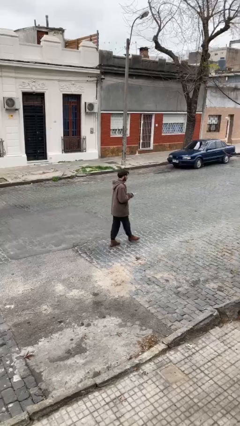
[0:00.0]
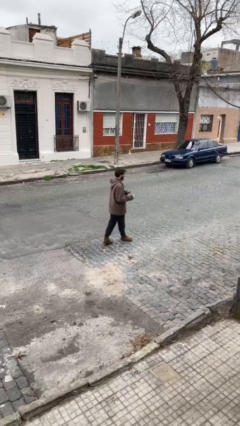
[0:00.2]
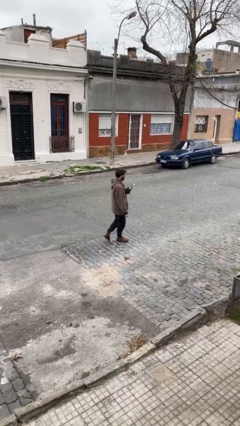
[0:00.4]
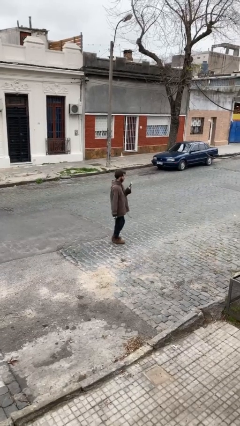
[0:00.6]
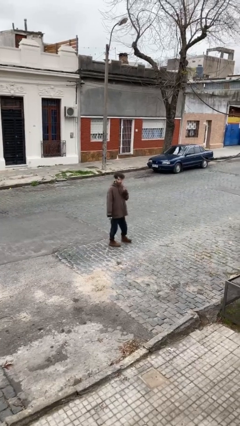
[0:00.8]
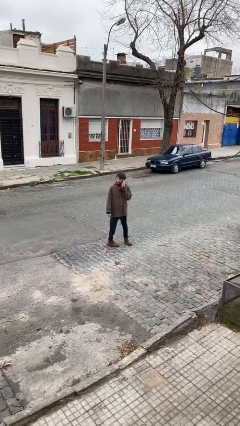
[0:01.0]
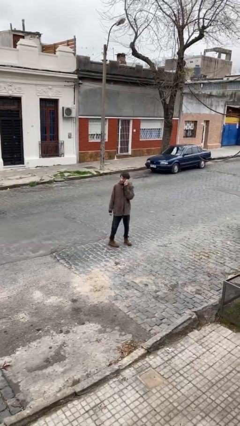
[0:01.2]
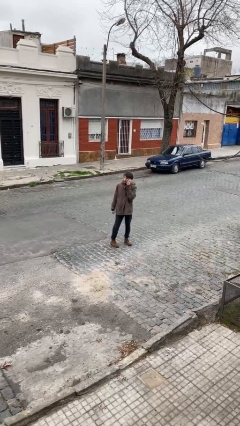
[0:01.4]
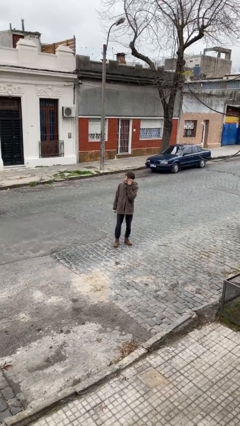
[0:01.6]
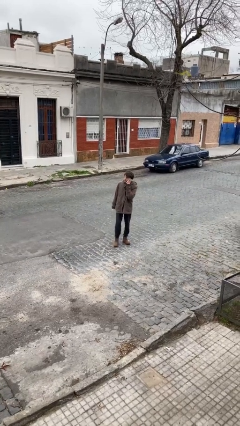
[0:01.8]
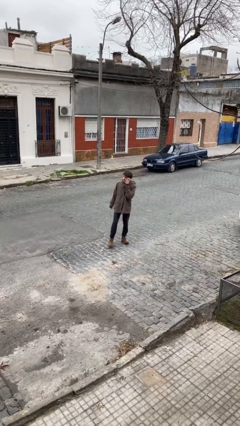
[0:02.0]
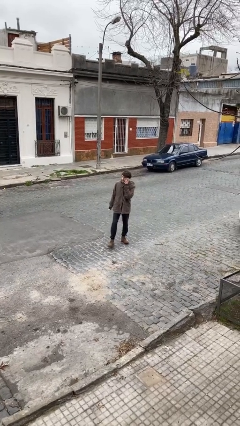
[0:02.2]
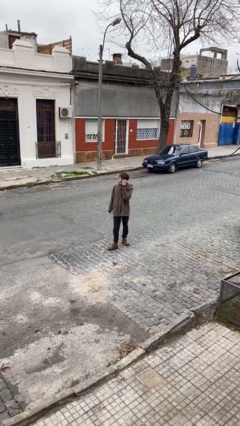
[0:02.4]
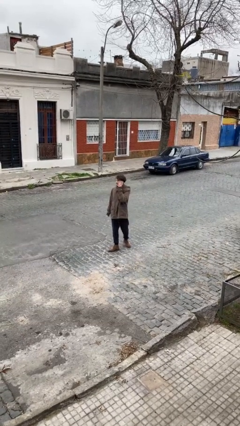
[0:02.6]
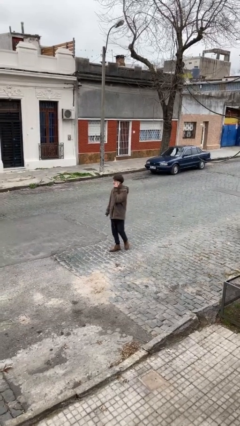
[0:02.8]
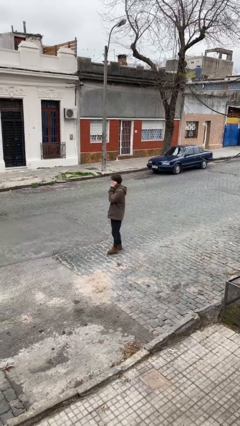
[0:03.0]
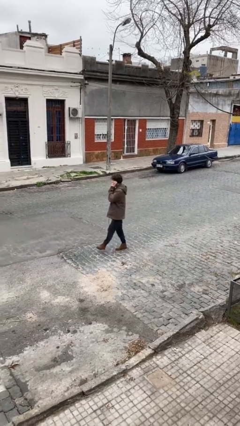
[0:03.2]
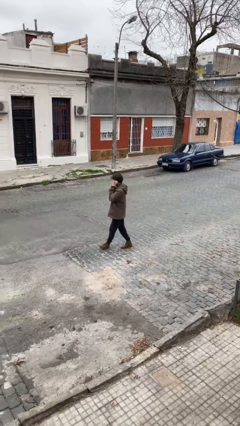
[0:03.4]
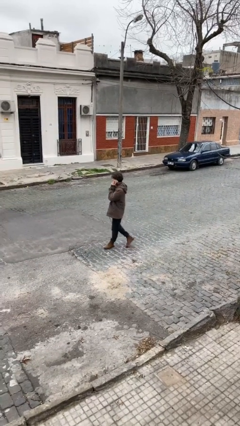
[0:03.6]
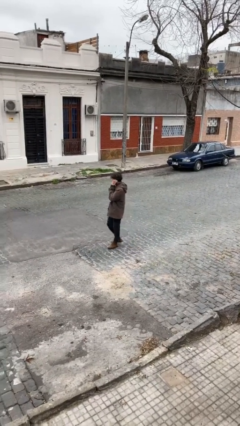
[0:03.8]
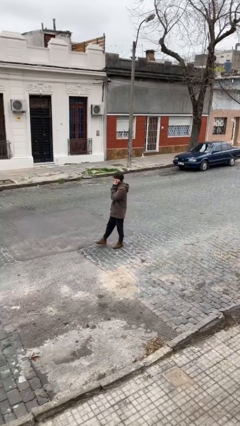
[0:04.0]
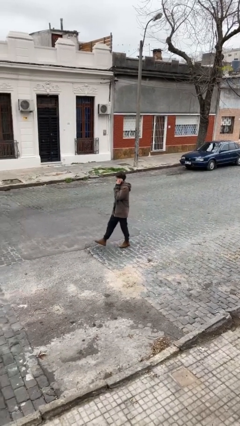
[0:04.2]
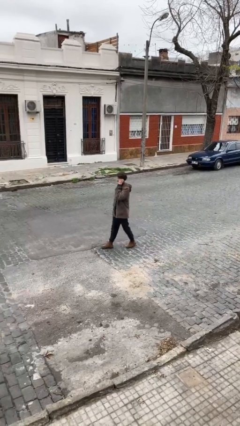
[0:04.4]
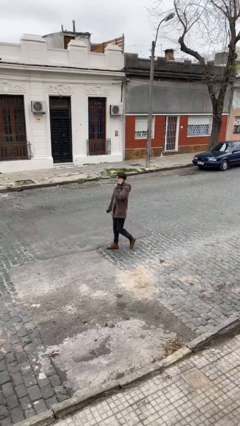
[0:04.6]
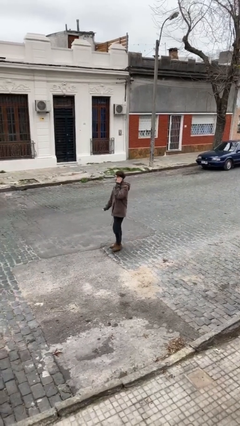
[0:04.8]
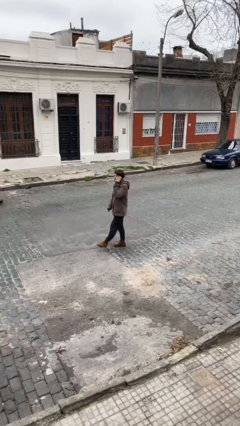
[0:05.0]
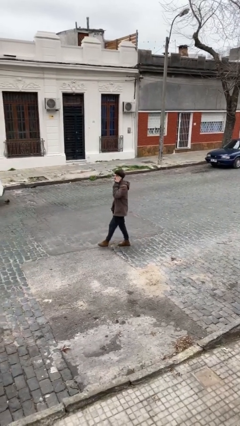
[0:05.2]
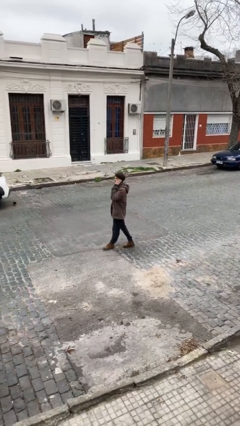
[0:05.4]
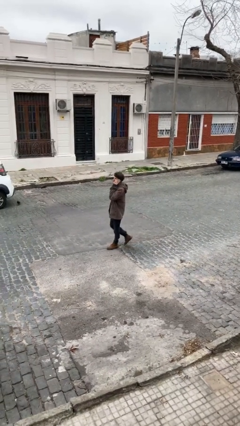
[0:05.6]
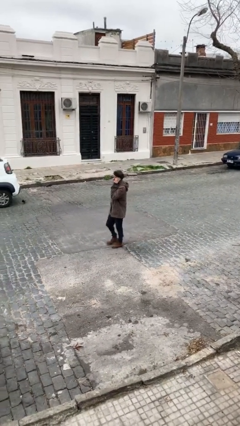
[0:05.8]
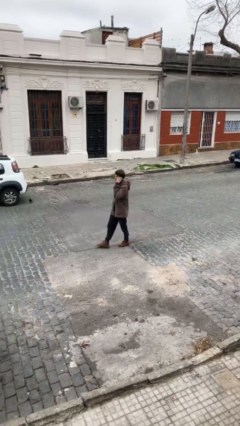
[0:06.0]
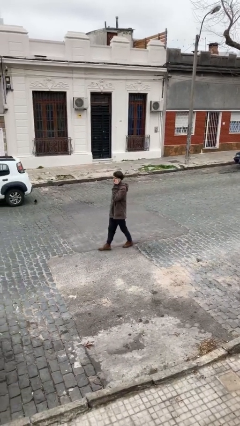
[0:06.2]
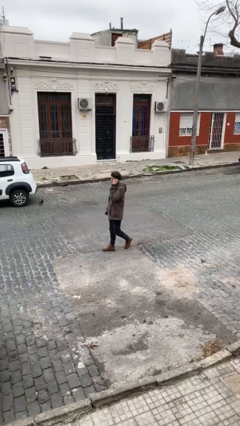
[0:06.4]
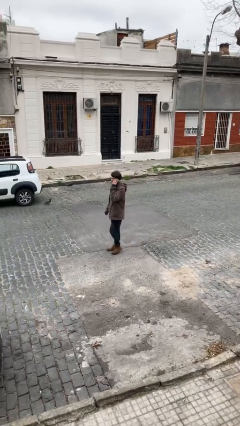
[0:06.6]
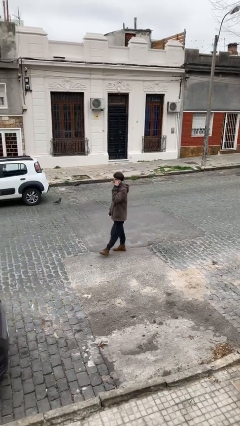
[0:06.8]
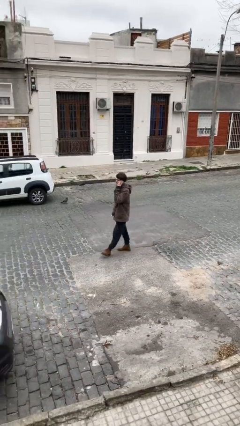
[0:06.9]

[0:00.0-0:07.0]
person talks on phone

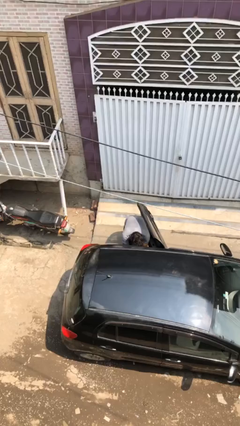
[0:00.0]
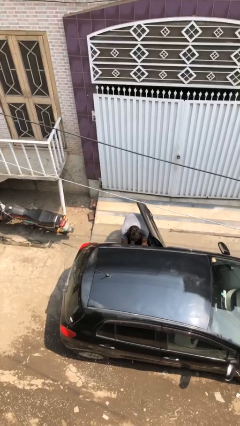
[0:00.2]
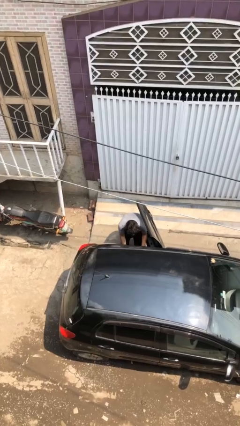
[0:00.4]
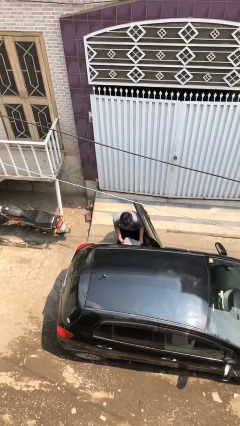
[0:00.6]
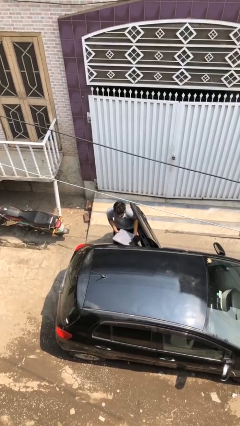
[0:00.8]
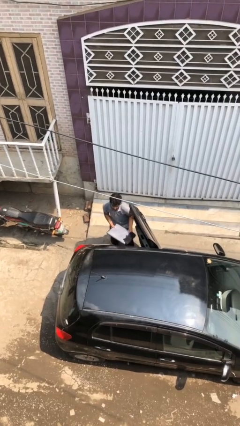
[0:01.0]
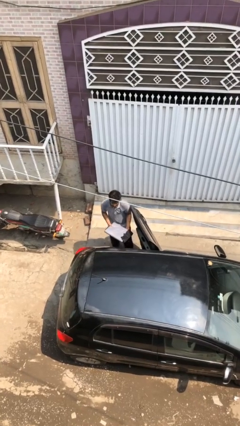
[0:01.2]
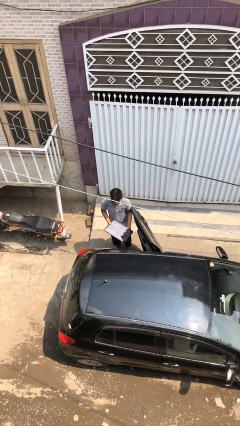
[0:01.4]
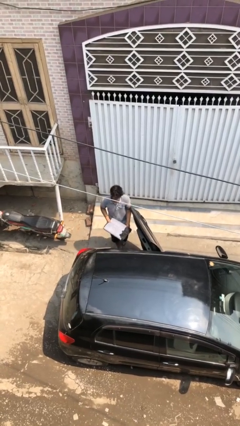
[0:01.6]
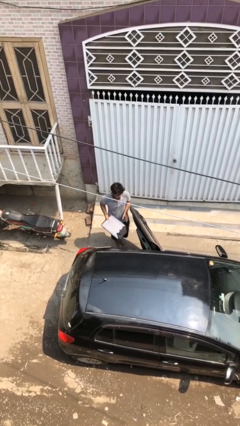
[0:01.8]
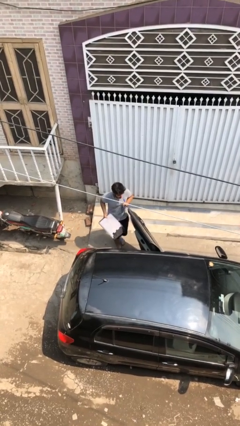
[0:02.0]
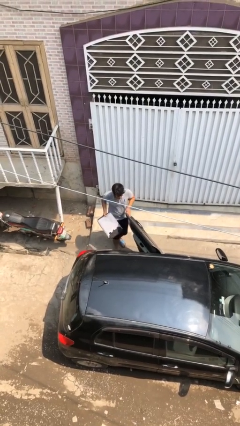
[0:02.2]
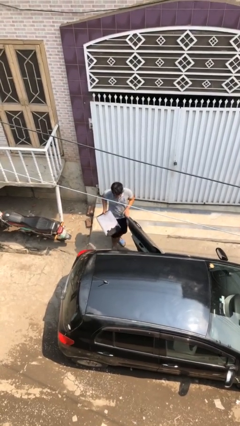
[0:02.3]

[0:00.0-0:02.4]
person unloads car

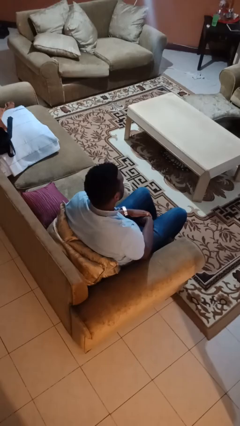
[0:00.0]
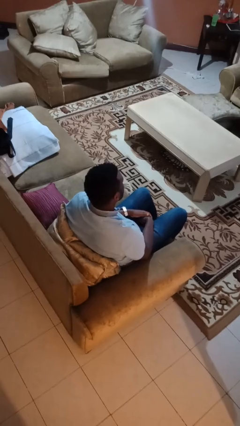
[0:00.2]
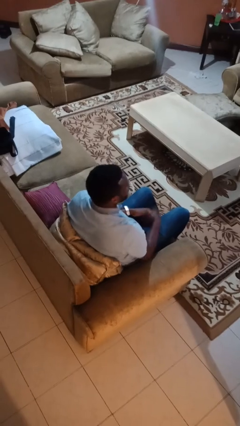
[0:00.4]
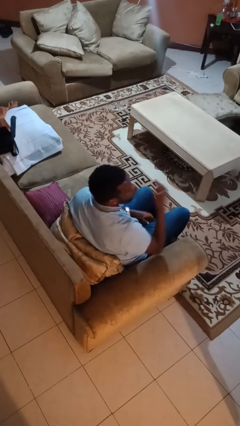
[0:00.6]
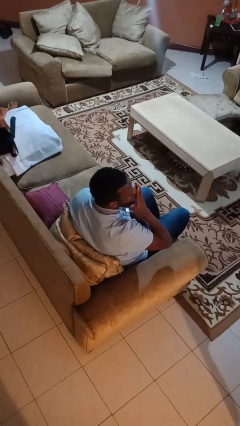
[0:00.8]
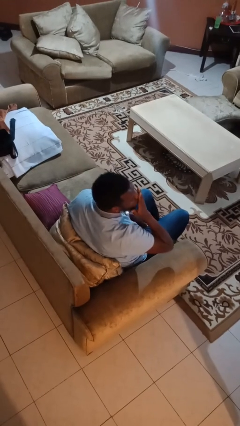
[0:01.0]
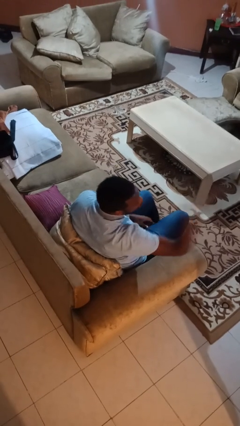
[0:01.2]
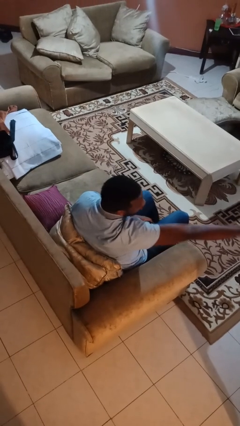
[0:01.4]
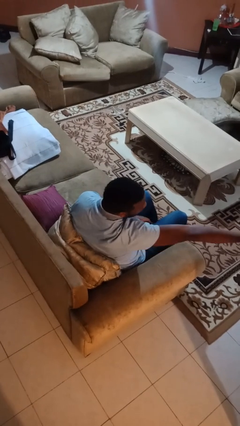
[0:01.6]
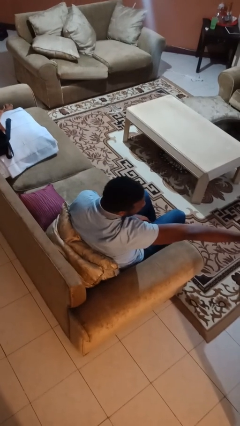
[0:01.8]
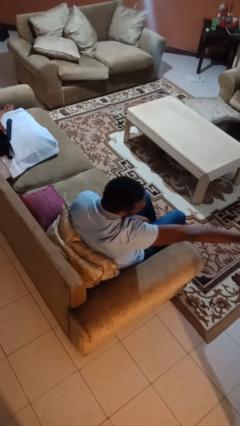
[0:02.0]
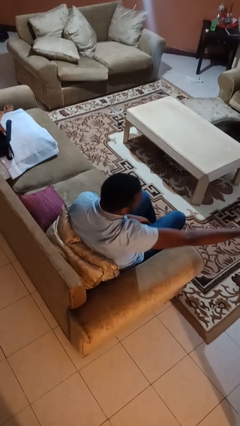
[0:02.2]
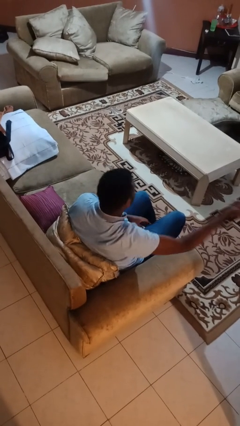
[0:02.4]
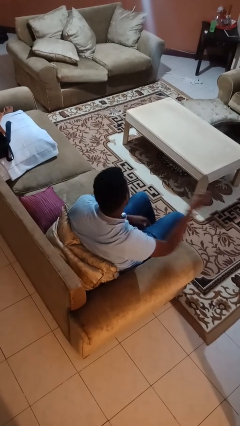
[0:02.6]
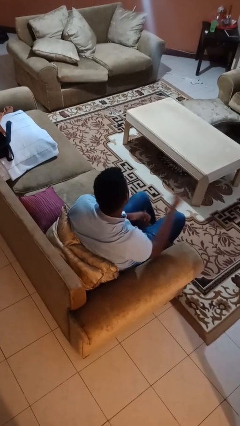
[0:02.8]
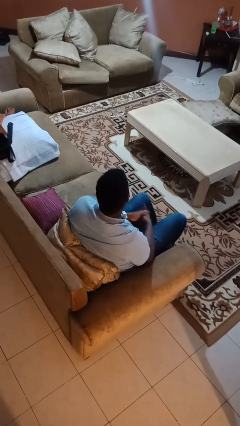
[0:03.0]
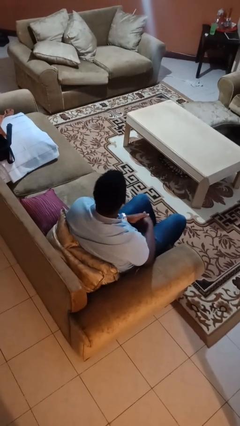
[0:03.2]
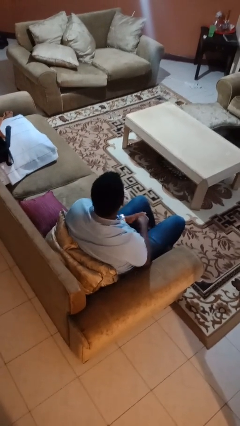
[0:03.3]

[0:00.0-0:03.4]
person gestures blow kiss

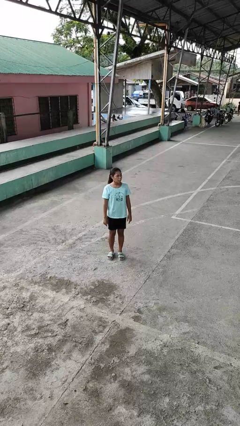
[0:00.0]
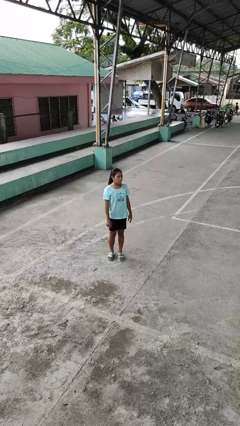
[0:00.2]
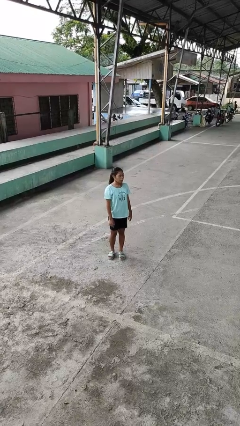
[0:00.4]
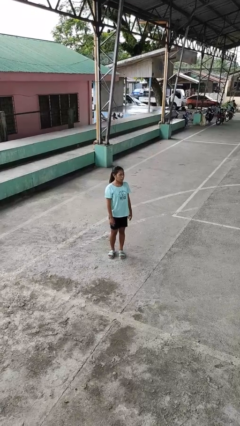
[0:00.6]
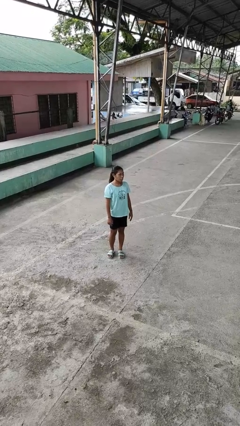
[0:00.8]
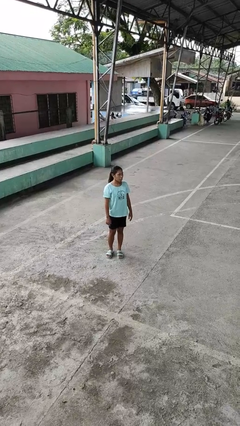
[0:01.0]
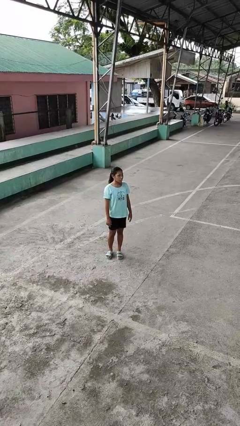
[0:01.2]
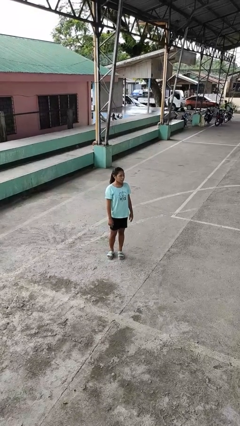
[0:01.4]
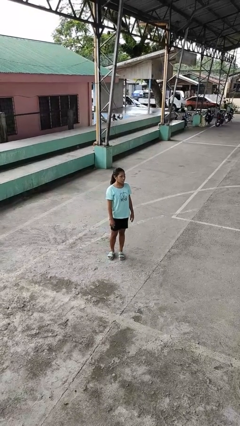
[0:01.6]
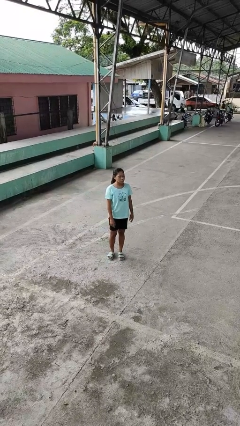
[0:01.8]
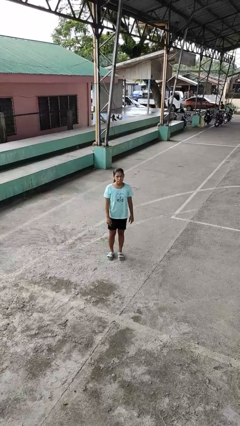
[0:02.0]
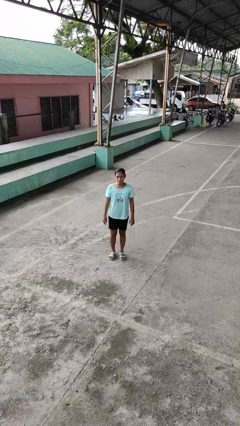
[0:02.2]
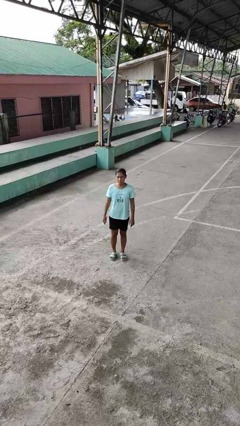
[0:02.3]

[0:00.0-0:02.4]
person sticks out tongue

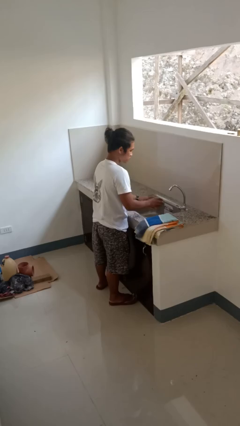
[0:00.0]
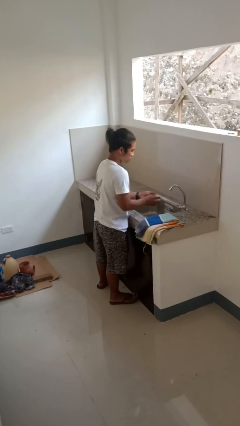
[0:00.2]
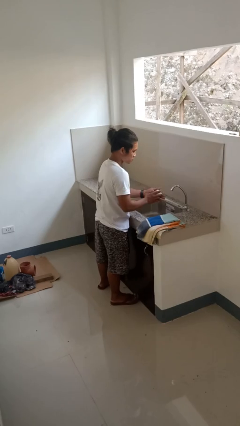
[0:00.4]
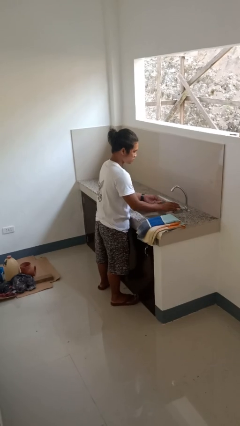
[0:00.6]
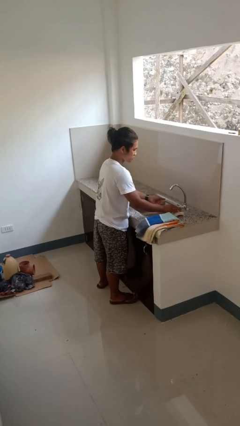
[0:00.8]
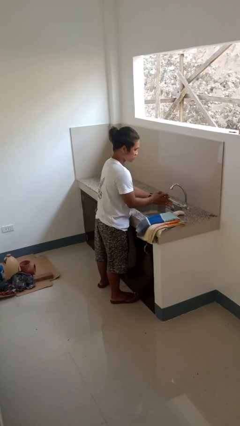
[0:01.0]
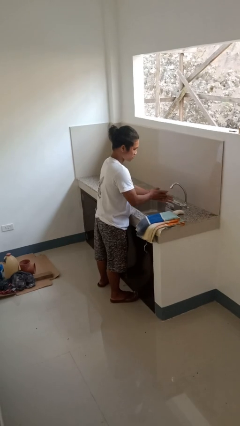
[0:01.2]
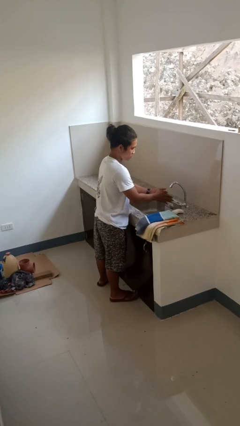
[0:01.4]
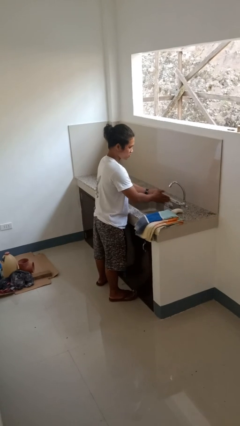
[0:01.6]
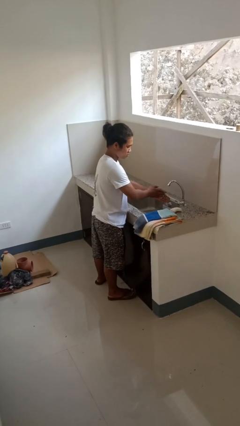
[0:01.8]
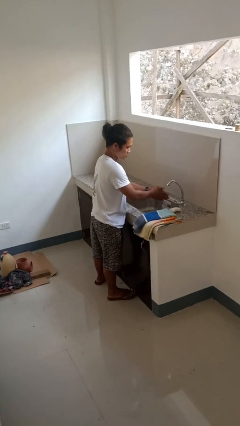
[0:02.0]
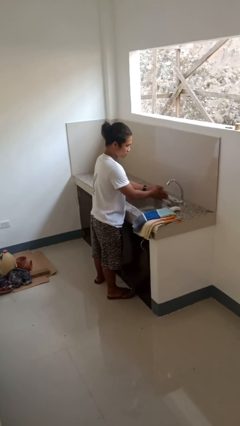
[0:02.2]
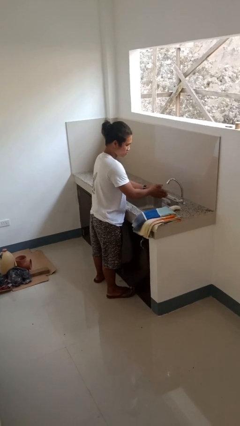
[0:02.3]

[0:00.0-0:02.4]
person washes hands
